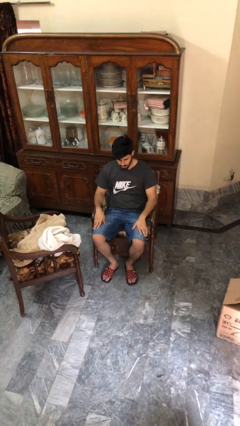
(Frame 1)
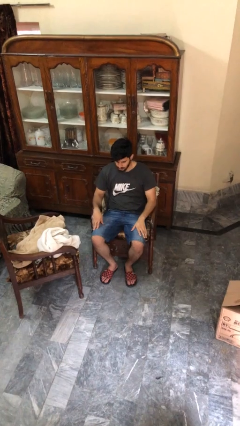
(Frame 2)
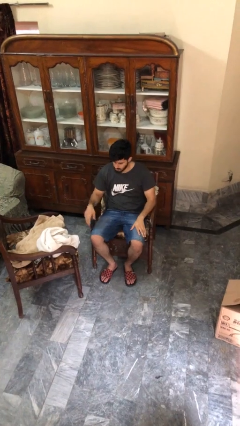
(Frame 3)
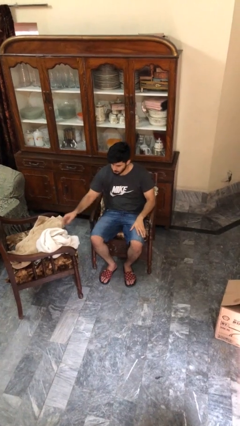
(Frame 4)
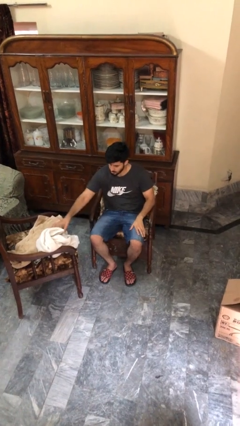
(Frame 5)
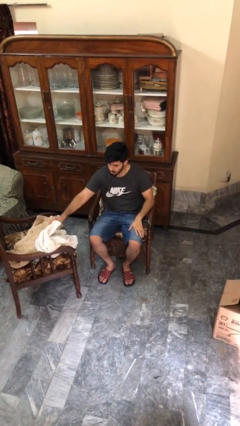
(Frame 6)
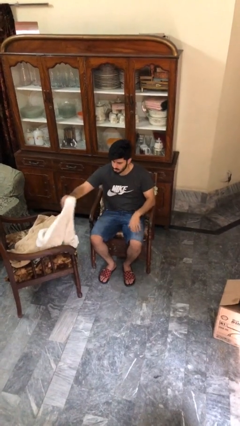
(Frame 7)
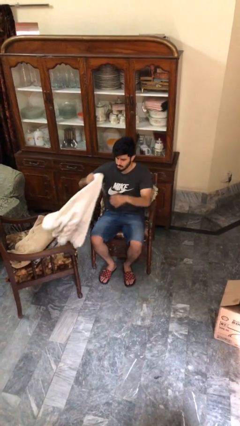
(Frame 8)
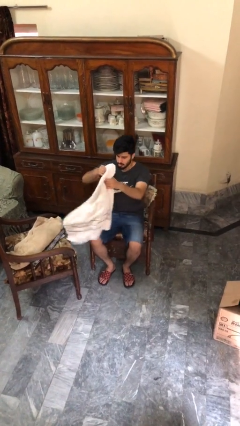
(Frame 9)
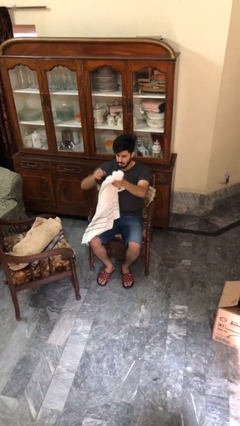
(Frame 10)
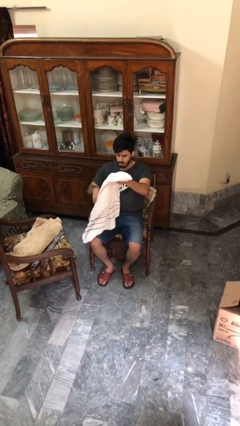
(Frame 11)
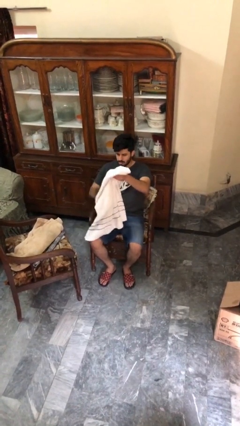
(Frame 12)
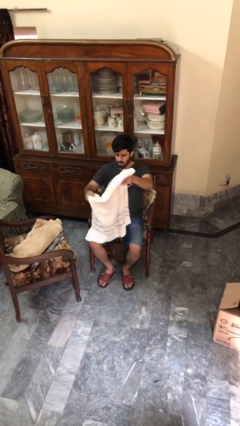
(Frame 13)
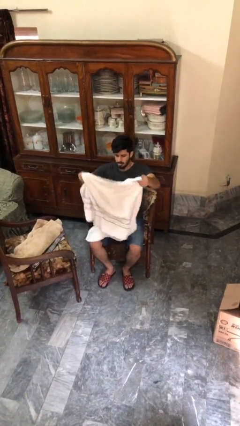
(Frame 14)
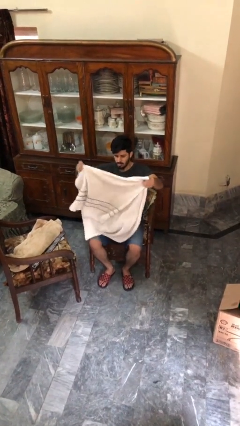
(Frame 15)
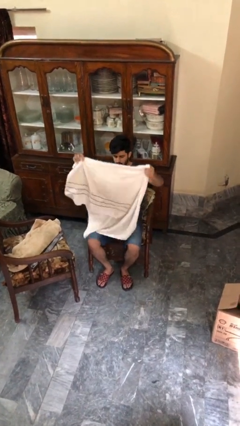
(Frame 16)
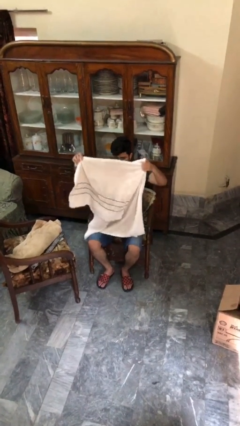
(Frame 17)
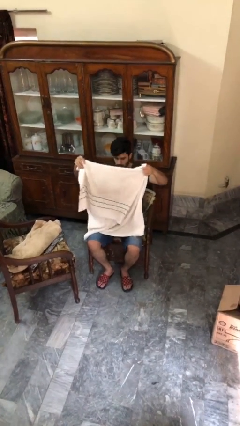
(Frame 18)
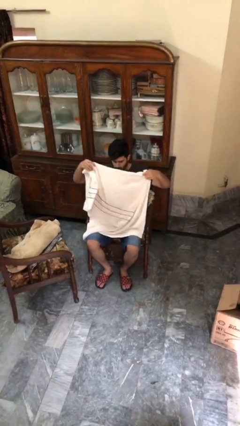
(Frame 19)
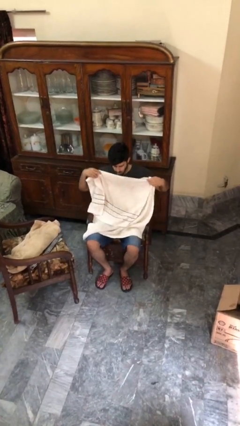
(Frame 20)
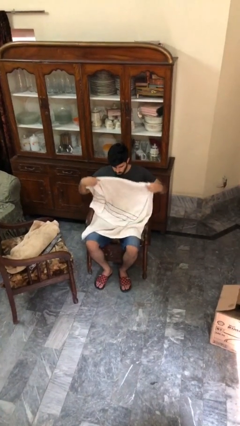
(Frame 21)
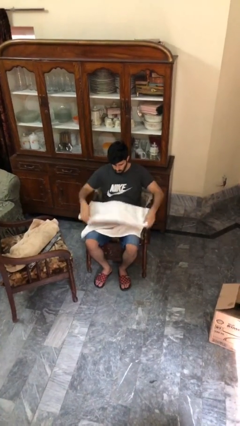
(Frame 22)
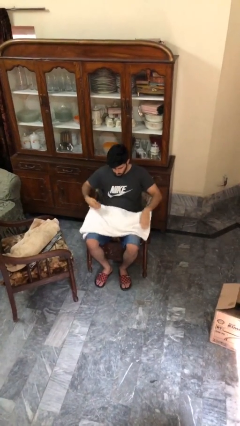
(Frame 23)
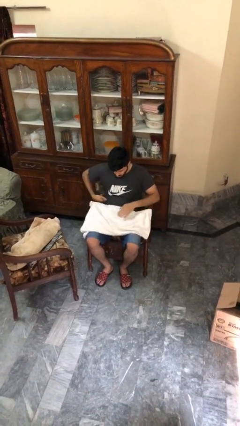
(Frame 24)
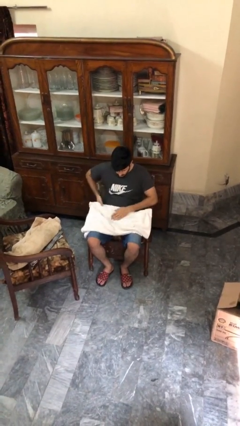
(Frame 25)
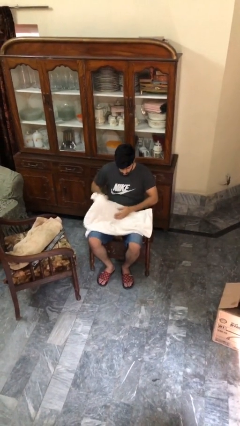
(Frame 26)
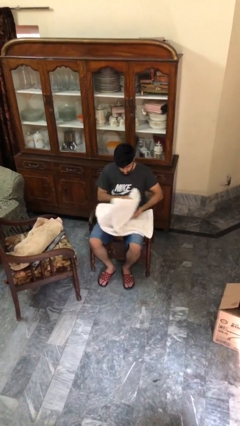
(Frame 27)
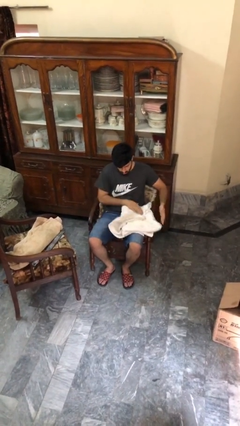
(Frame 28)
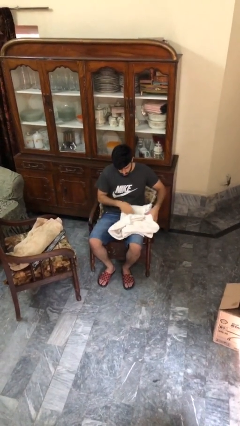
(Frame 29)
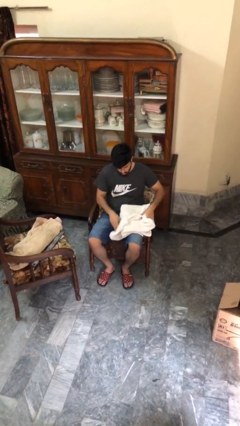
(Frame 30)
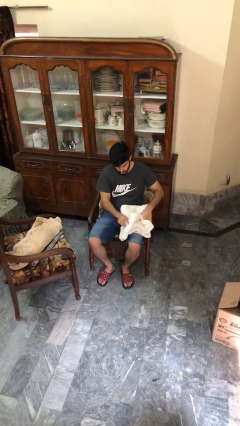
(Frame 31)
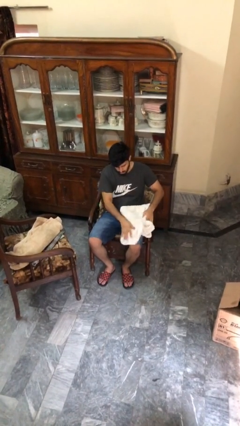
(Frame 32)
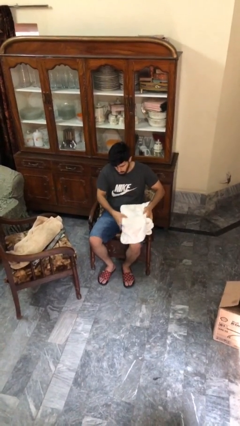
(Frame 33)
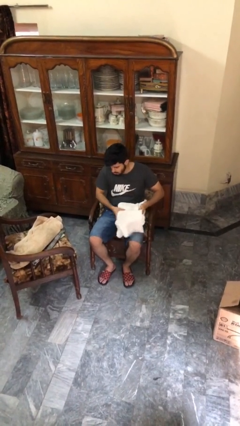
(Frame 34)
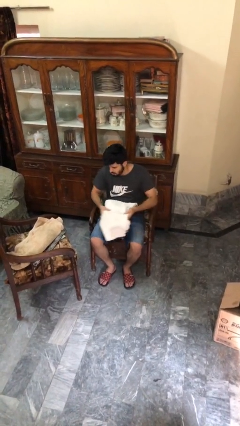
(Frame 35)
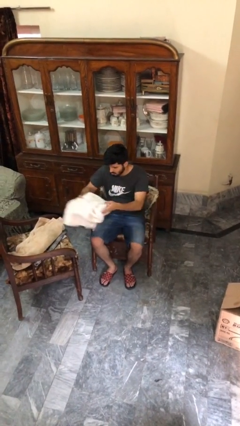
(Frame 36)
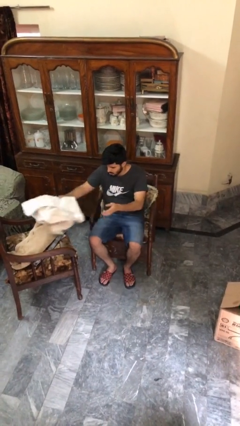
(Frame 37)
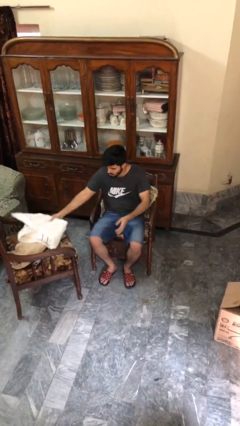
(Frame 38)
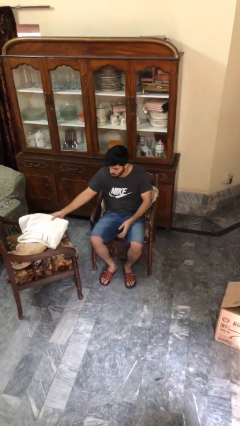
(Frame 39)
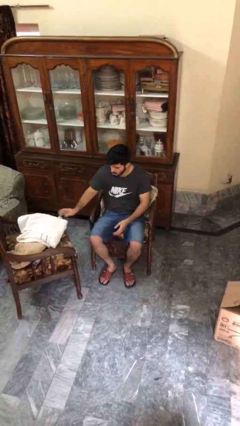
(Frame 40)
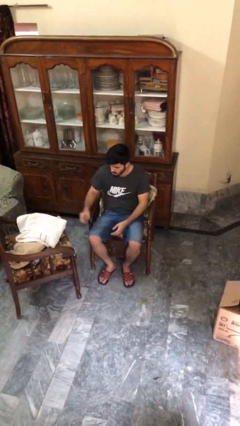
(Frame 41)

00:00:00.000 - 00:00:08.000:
person folds towel

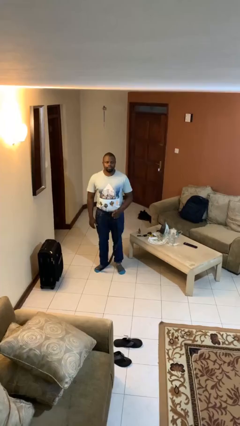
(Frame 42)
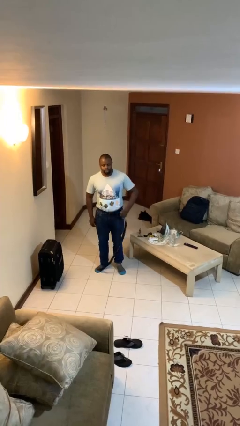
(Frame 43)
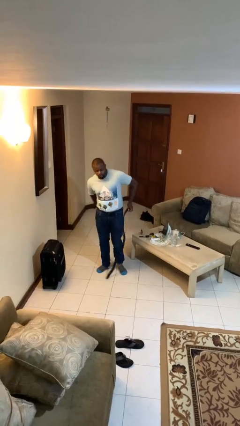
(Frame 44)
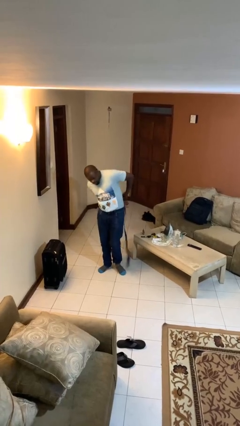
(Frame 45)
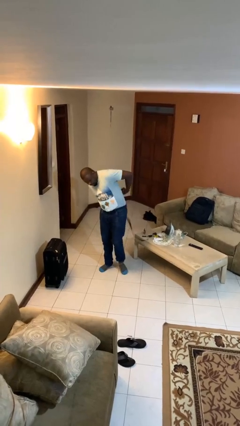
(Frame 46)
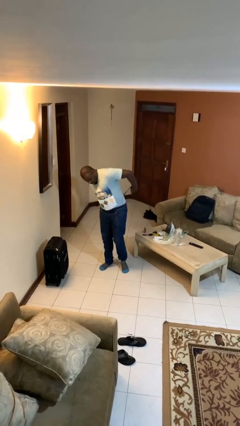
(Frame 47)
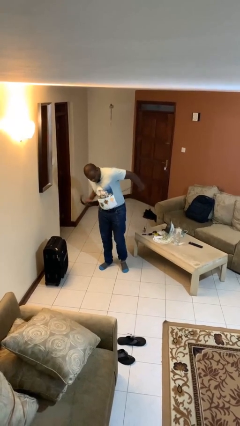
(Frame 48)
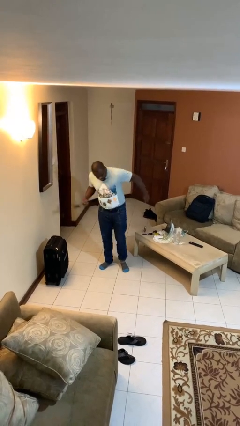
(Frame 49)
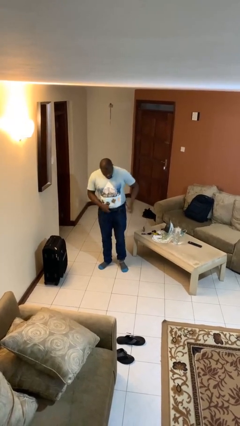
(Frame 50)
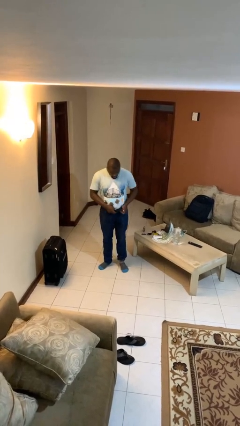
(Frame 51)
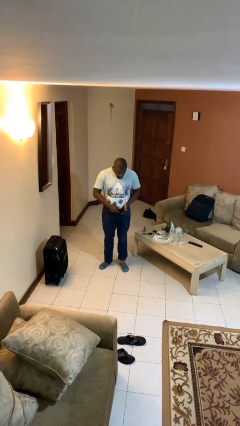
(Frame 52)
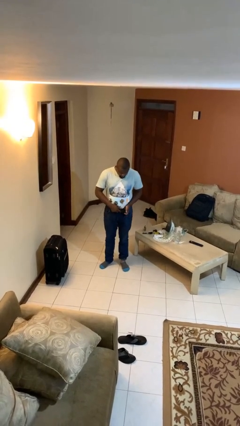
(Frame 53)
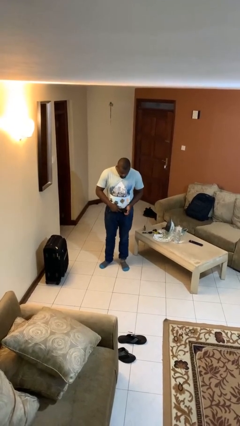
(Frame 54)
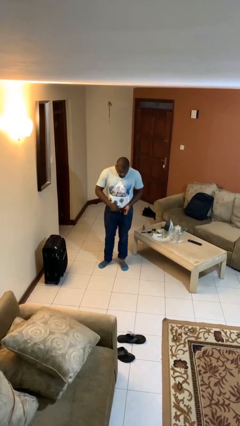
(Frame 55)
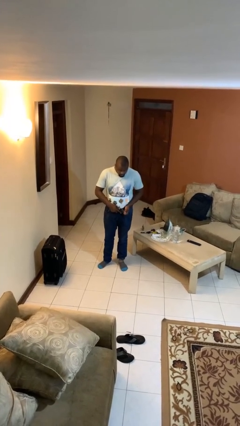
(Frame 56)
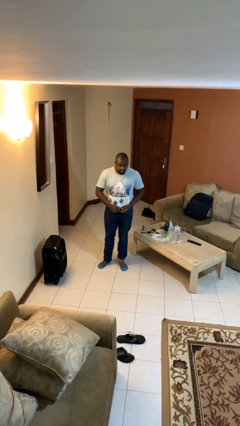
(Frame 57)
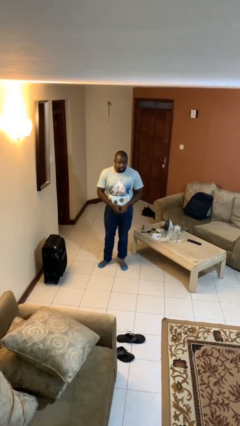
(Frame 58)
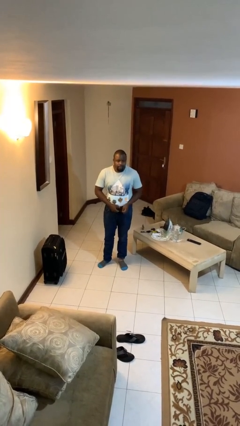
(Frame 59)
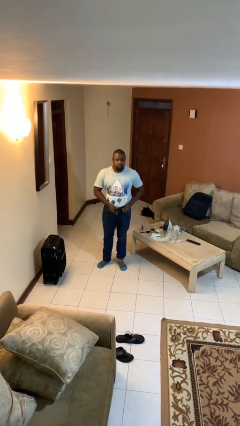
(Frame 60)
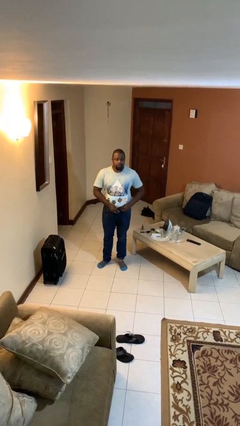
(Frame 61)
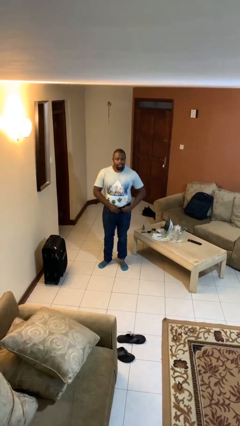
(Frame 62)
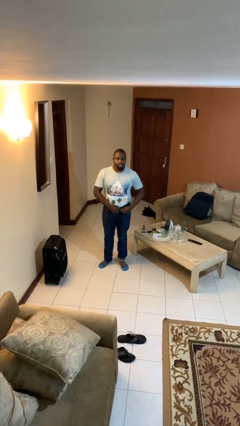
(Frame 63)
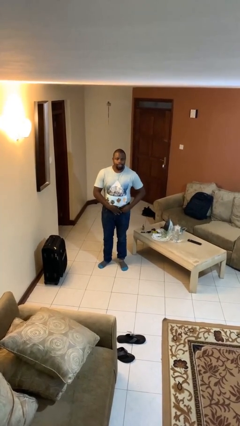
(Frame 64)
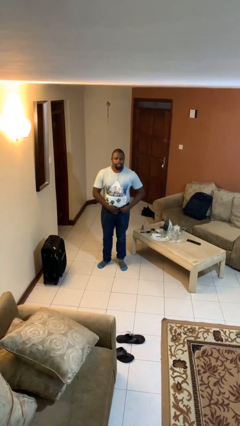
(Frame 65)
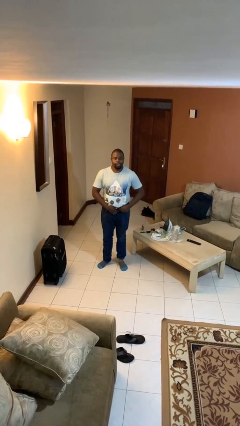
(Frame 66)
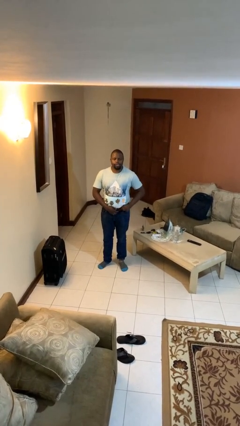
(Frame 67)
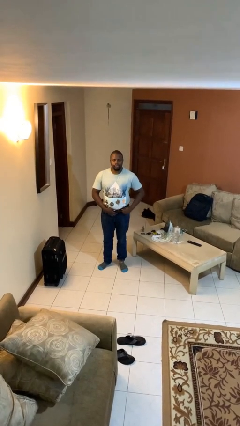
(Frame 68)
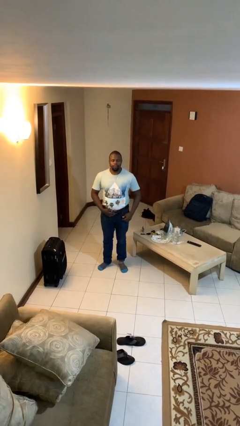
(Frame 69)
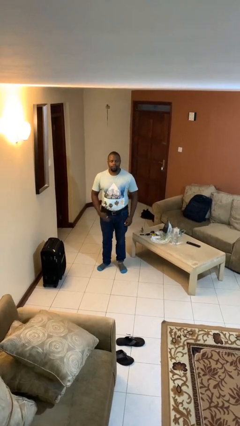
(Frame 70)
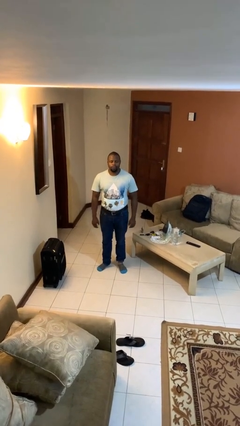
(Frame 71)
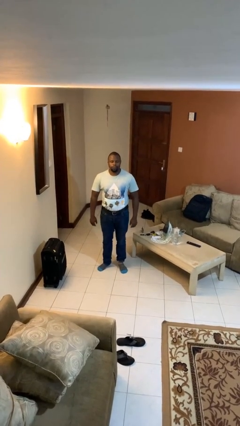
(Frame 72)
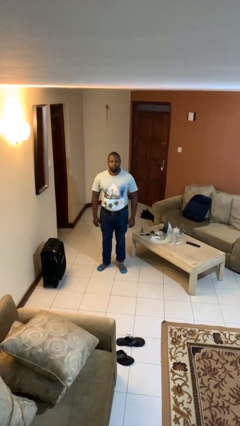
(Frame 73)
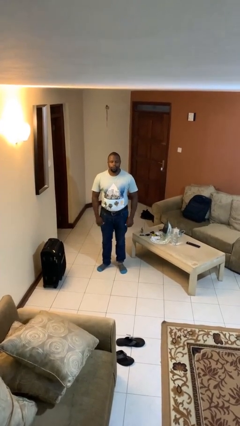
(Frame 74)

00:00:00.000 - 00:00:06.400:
person puts on belt

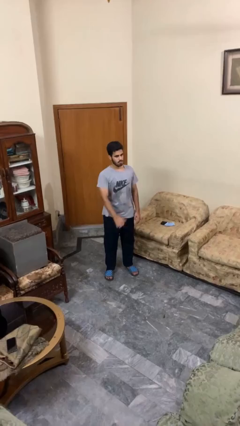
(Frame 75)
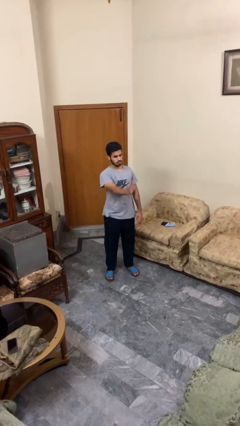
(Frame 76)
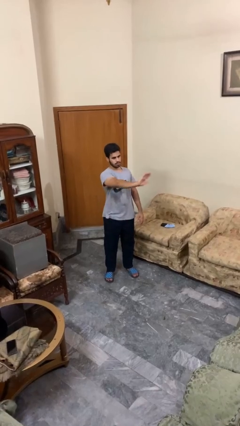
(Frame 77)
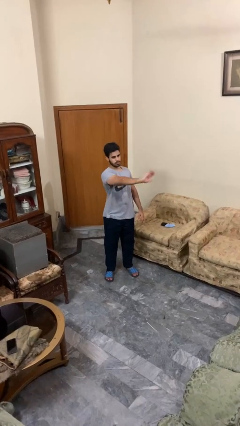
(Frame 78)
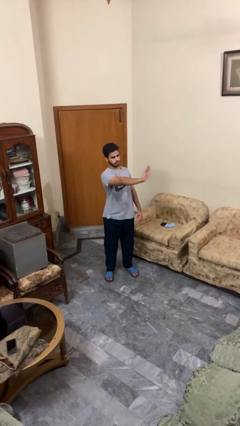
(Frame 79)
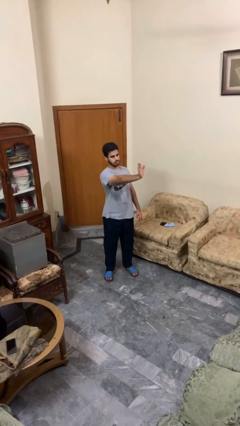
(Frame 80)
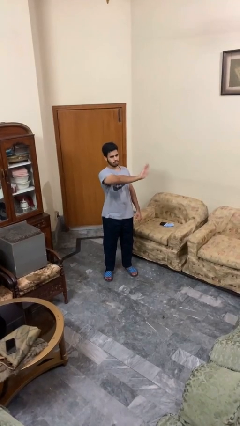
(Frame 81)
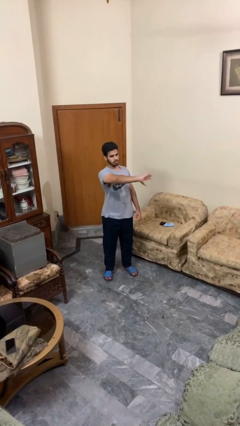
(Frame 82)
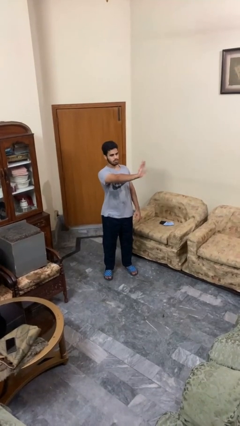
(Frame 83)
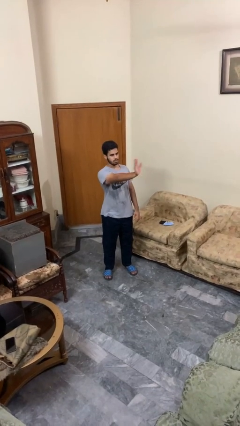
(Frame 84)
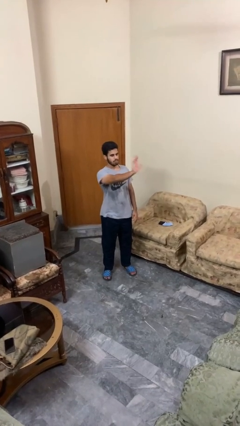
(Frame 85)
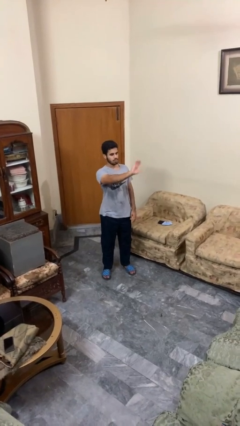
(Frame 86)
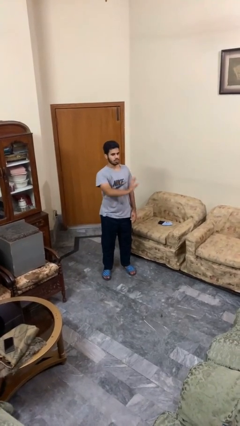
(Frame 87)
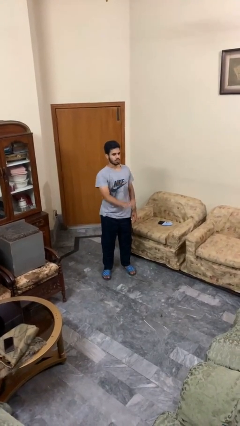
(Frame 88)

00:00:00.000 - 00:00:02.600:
person waves at person

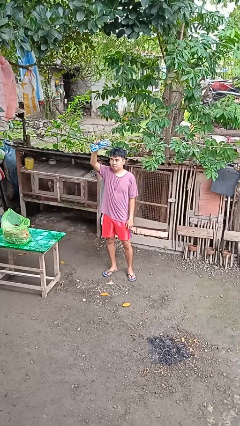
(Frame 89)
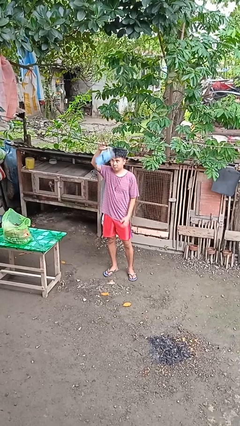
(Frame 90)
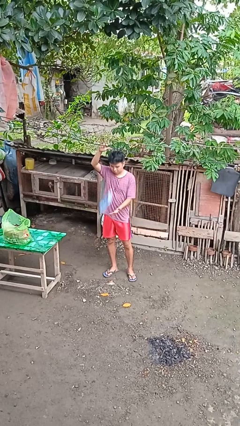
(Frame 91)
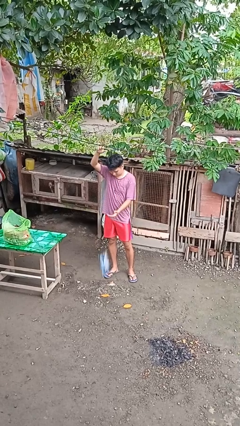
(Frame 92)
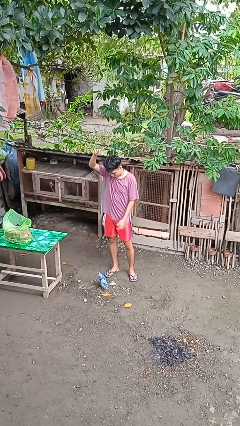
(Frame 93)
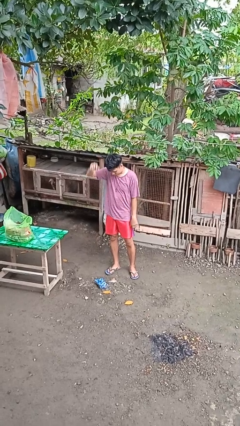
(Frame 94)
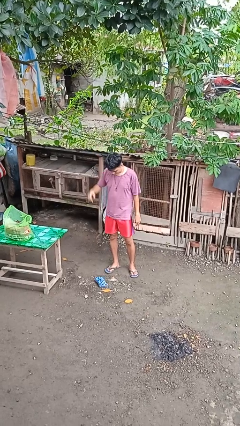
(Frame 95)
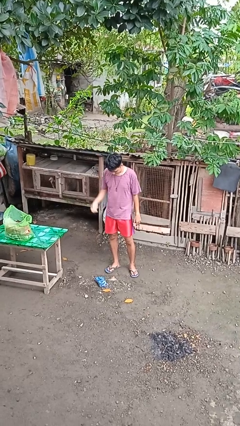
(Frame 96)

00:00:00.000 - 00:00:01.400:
person drops object
